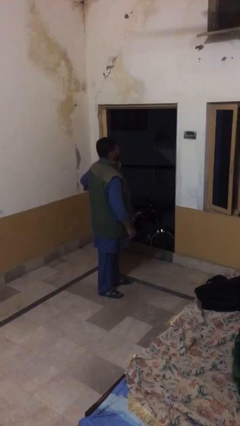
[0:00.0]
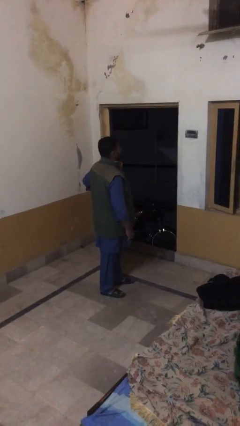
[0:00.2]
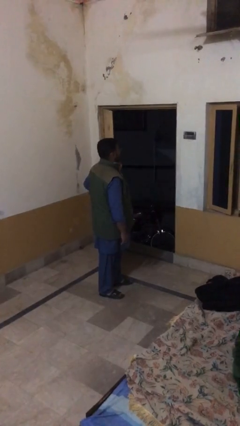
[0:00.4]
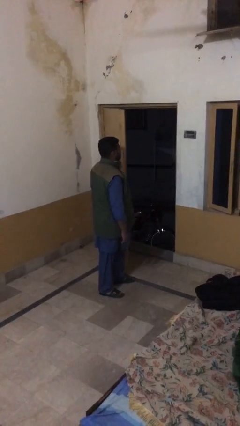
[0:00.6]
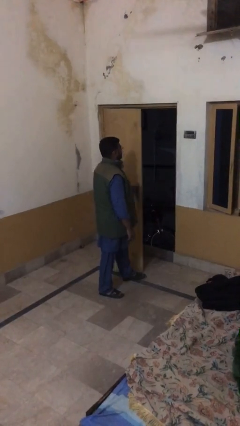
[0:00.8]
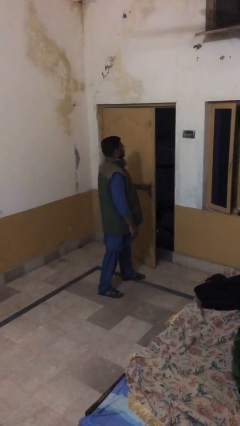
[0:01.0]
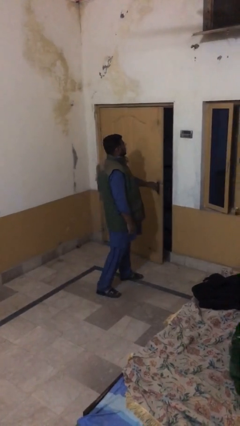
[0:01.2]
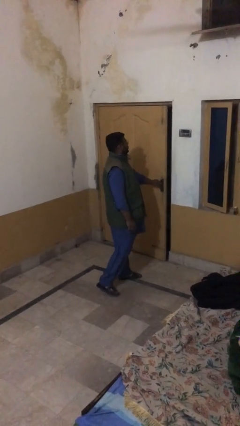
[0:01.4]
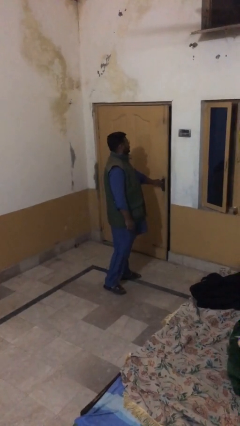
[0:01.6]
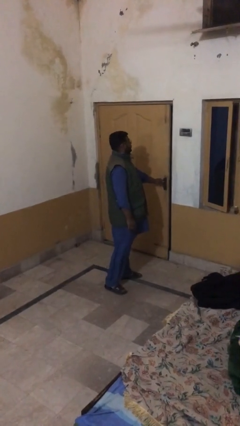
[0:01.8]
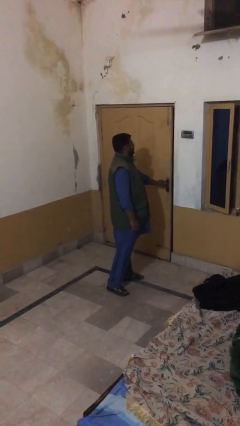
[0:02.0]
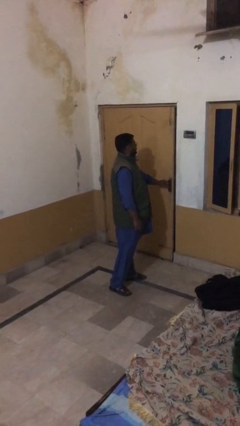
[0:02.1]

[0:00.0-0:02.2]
person closes facility door

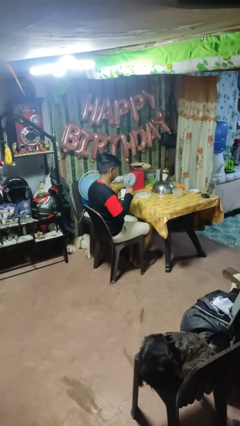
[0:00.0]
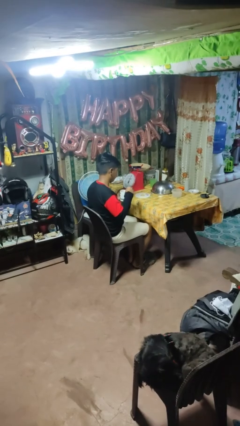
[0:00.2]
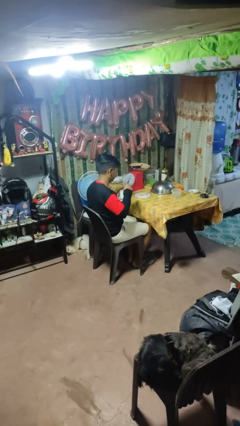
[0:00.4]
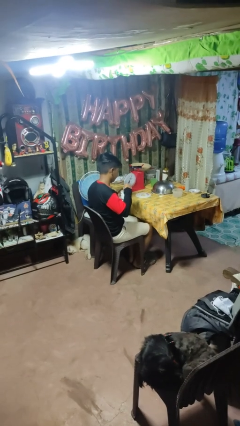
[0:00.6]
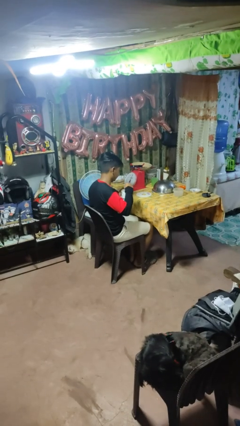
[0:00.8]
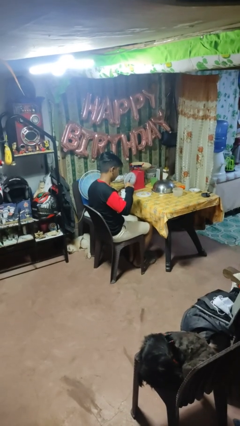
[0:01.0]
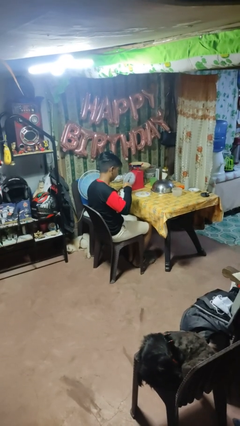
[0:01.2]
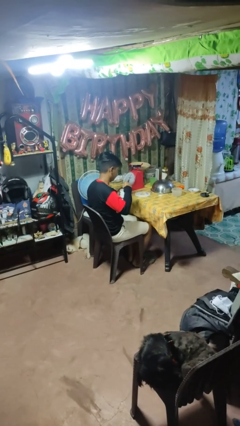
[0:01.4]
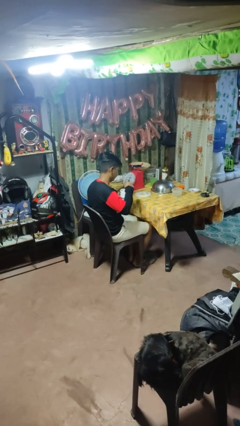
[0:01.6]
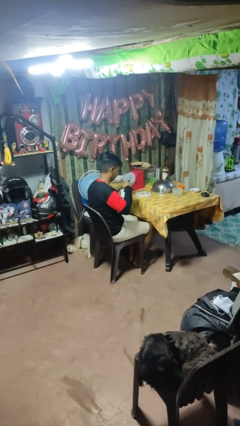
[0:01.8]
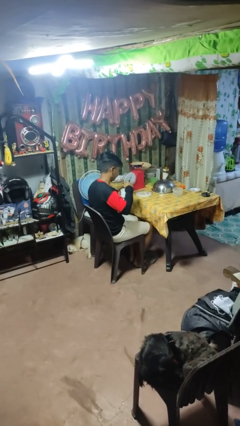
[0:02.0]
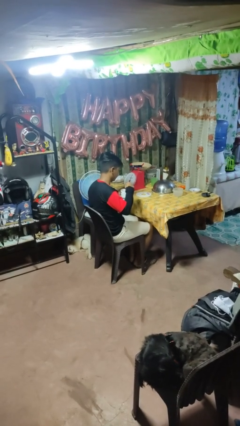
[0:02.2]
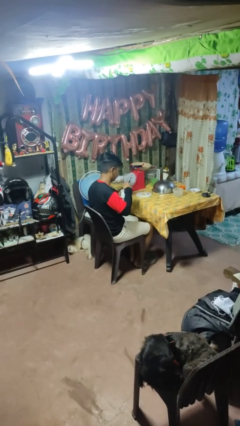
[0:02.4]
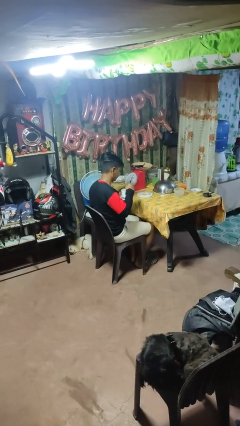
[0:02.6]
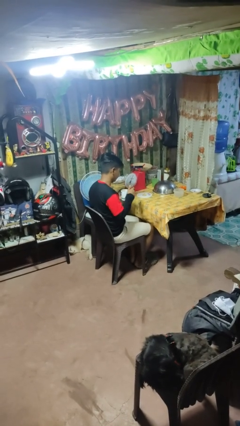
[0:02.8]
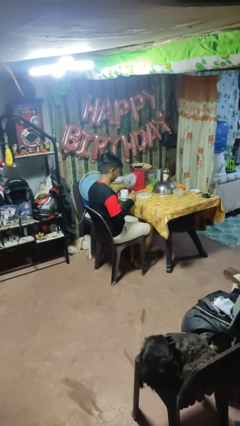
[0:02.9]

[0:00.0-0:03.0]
person stirs mug

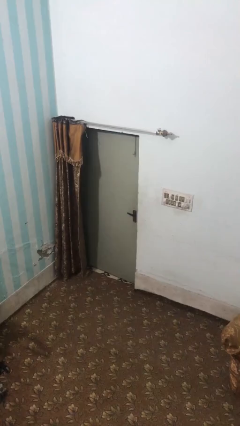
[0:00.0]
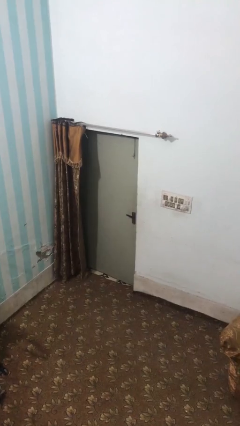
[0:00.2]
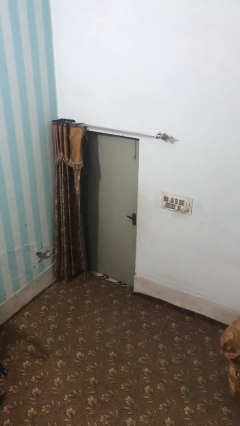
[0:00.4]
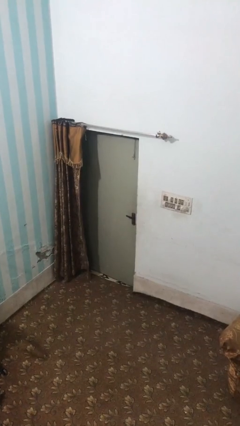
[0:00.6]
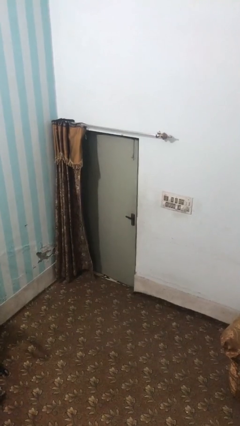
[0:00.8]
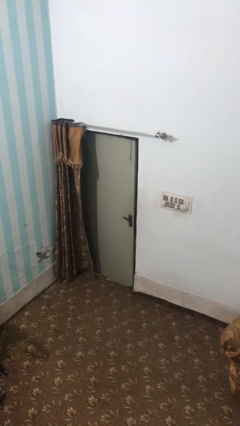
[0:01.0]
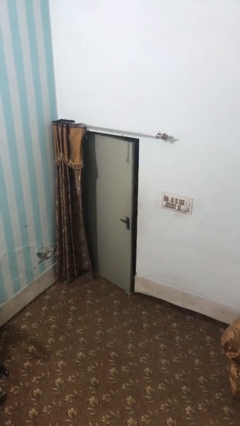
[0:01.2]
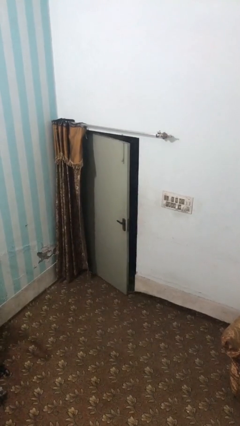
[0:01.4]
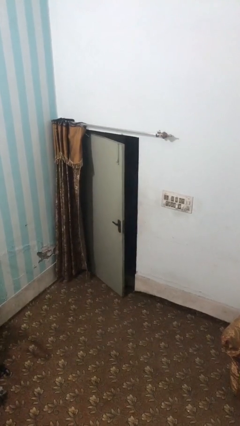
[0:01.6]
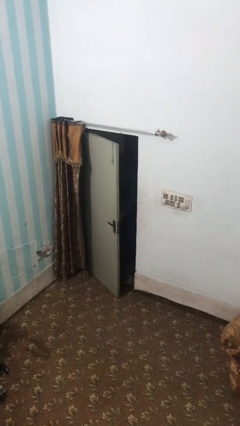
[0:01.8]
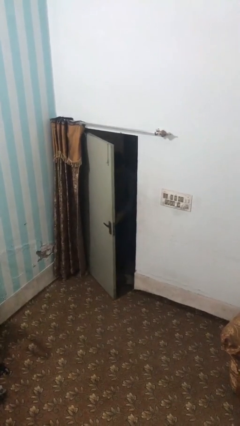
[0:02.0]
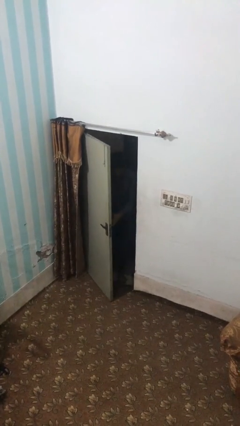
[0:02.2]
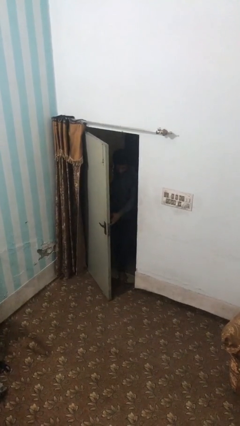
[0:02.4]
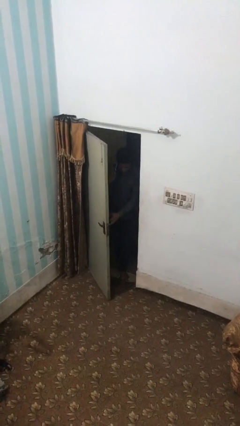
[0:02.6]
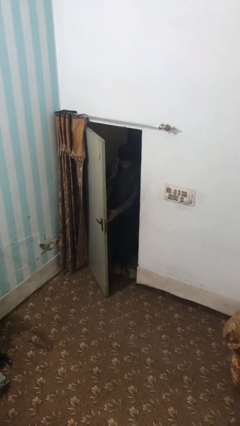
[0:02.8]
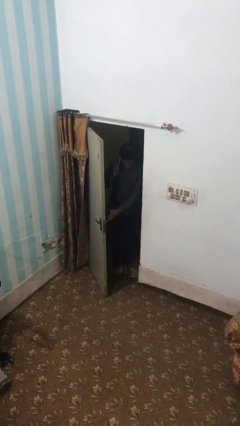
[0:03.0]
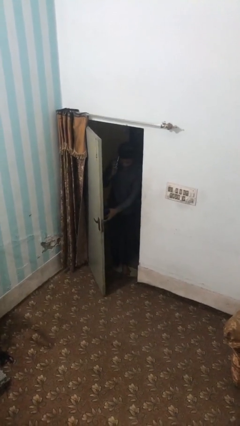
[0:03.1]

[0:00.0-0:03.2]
person opens facility door

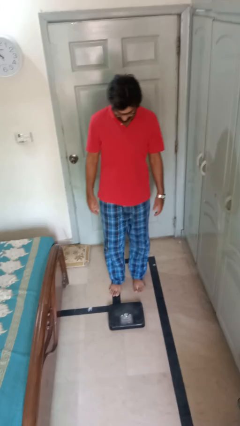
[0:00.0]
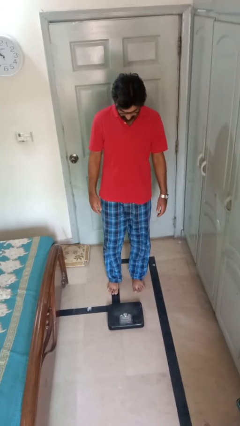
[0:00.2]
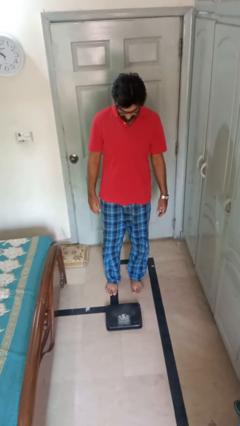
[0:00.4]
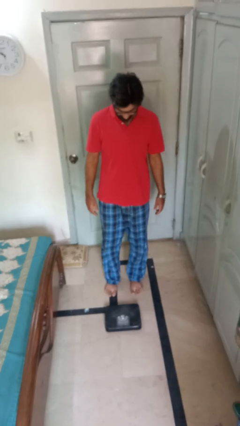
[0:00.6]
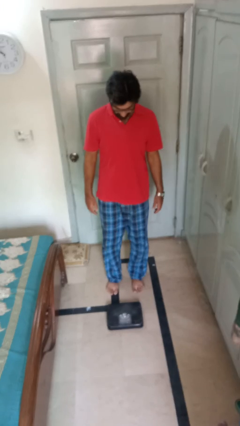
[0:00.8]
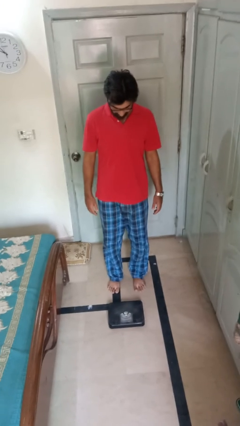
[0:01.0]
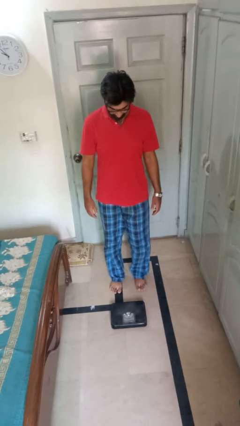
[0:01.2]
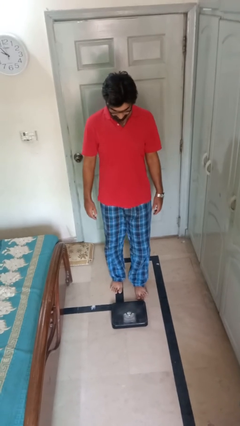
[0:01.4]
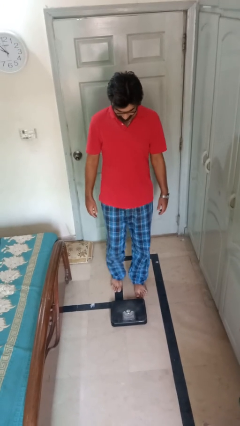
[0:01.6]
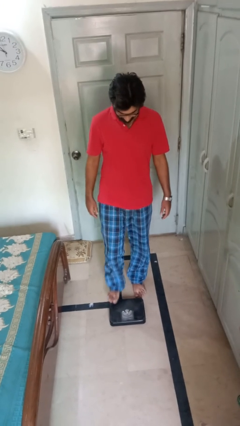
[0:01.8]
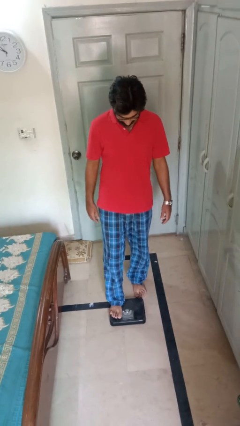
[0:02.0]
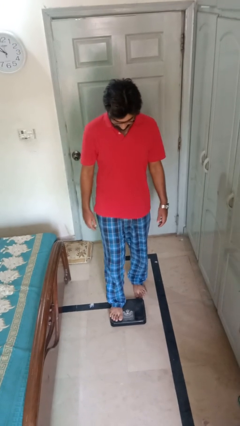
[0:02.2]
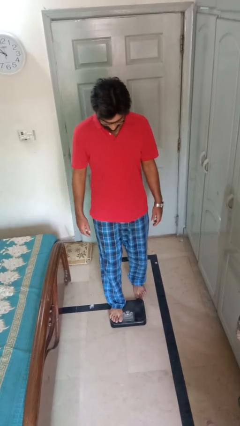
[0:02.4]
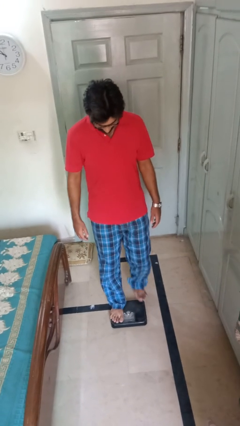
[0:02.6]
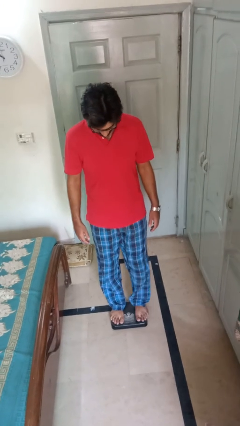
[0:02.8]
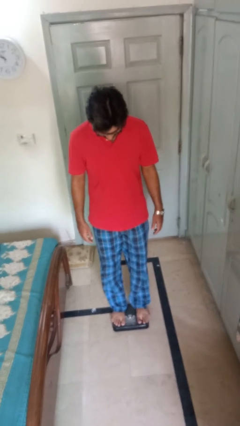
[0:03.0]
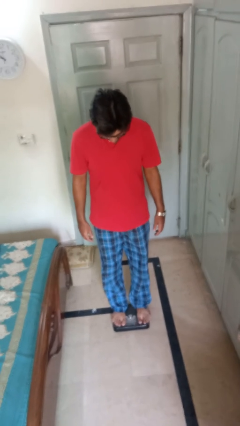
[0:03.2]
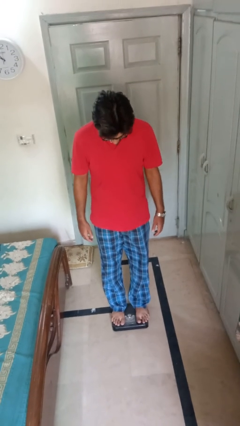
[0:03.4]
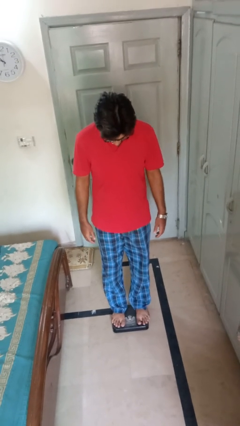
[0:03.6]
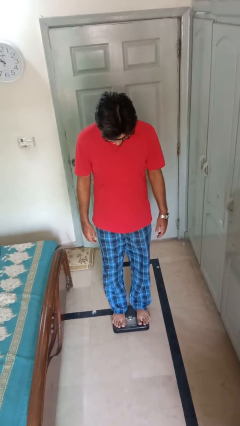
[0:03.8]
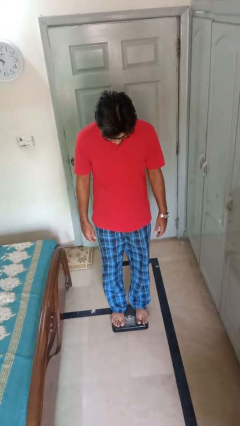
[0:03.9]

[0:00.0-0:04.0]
person uses bodyweight scale

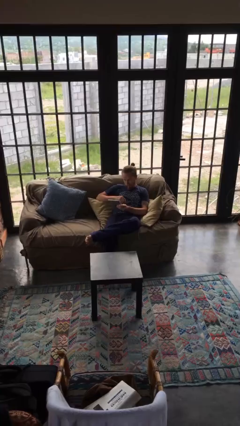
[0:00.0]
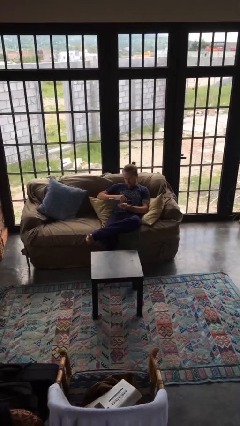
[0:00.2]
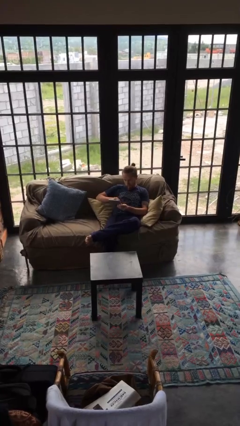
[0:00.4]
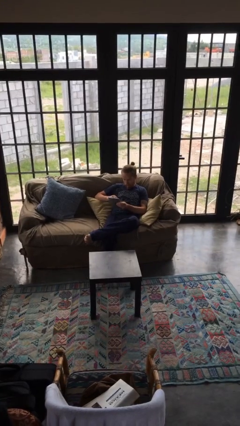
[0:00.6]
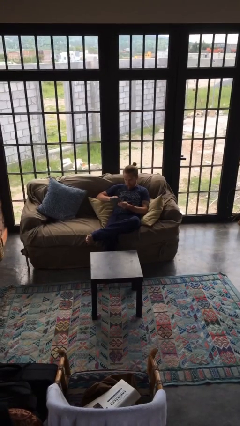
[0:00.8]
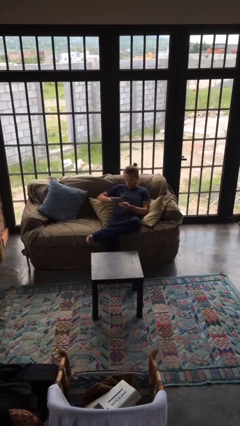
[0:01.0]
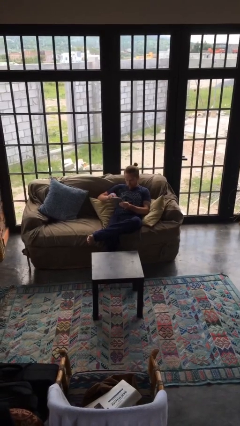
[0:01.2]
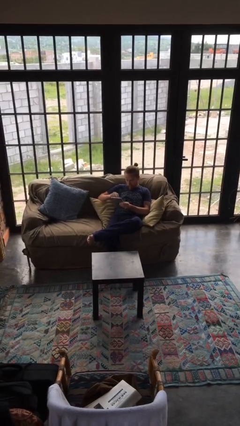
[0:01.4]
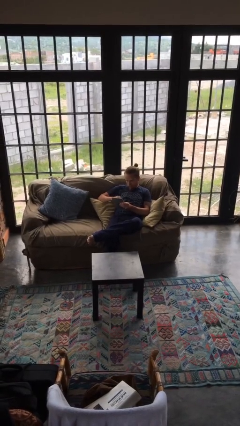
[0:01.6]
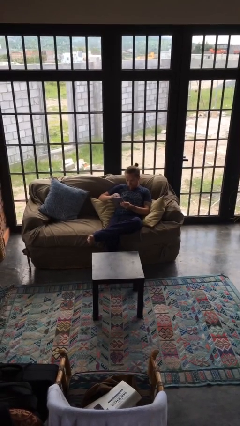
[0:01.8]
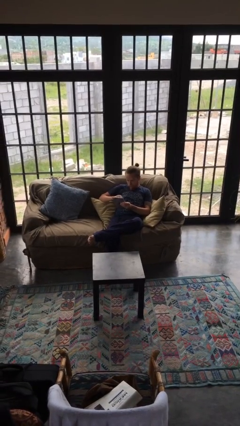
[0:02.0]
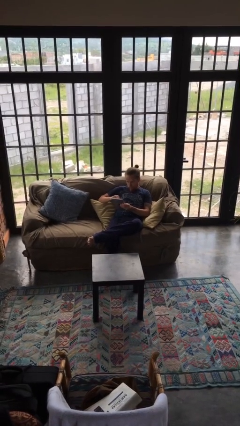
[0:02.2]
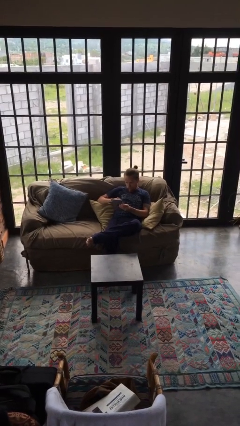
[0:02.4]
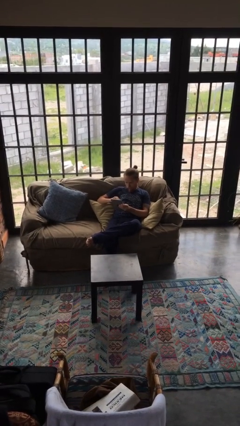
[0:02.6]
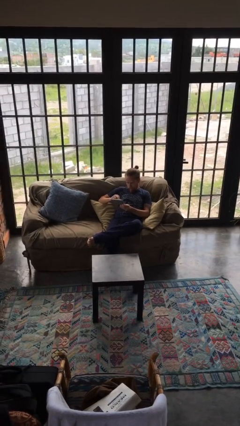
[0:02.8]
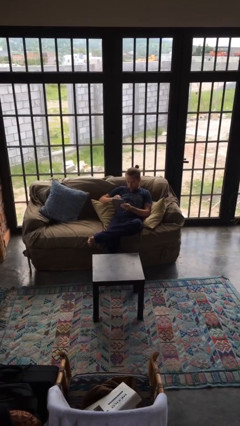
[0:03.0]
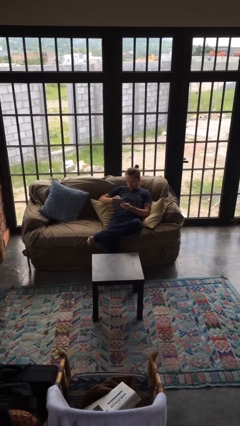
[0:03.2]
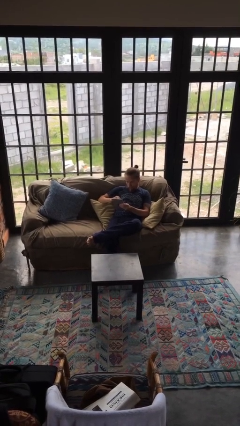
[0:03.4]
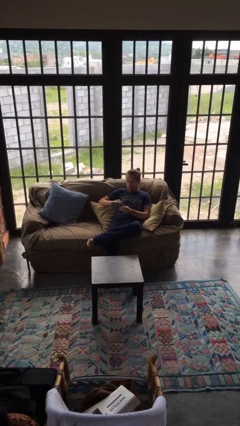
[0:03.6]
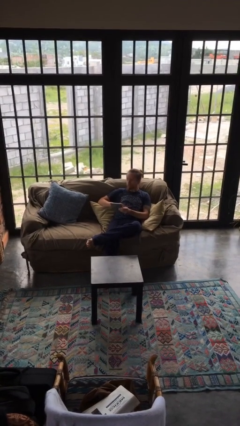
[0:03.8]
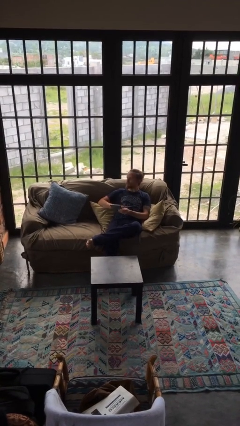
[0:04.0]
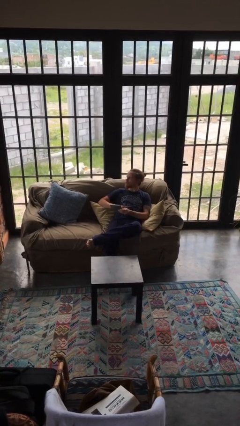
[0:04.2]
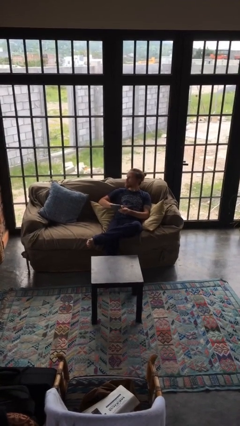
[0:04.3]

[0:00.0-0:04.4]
person interacts with tablet

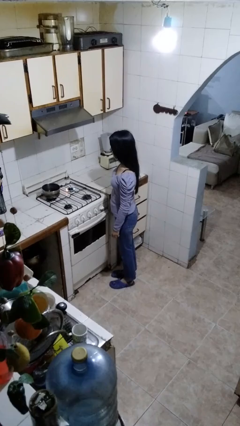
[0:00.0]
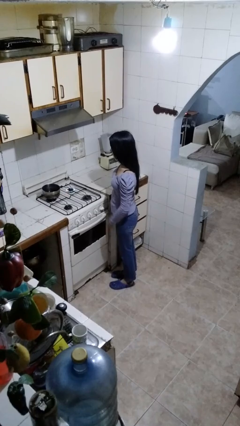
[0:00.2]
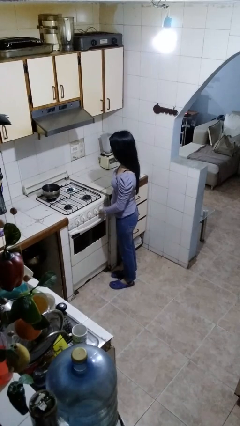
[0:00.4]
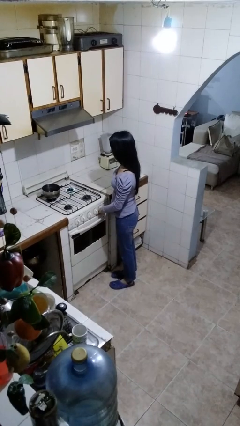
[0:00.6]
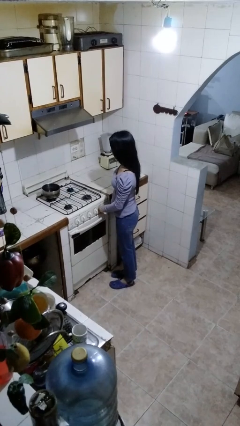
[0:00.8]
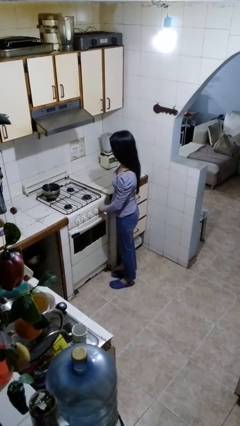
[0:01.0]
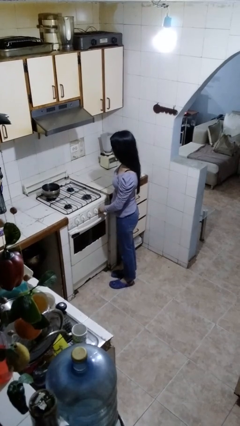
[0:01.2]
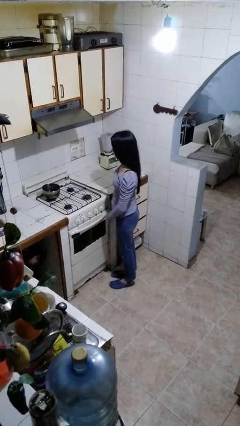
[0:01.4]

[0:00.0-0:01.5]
person turns off stovetop
